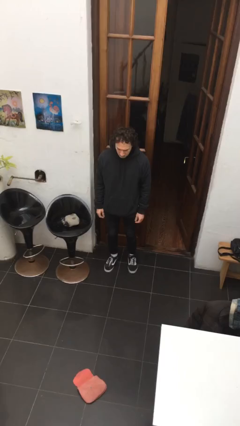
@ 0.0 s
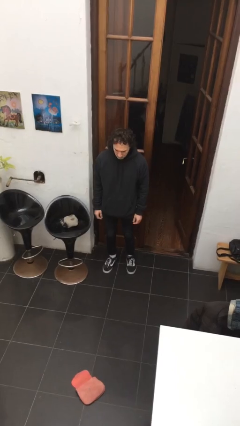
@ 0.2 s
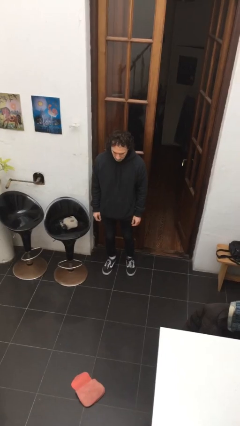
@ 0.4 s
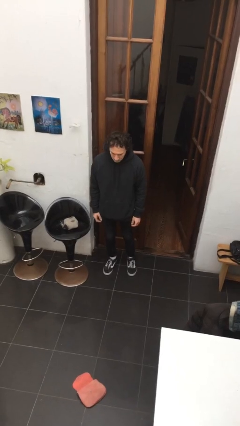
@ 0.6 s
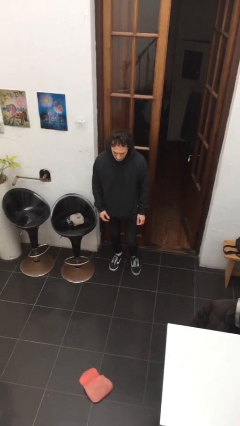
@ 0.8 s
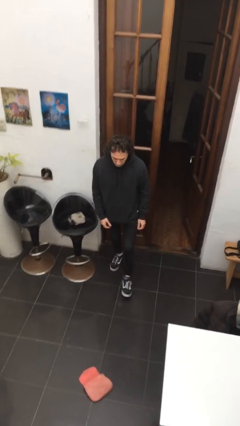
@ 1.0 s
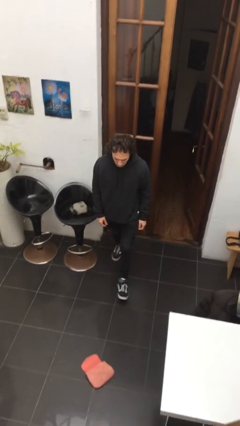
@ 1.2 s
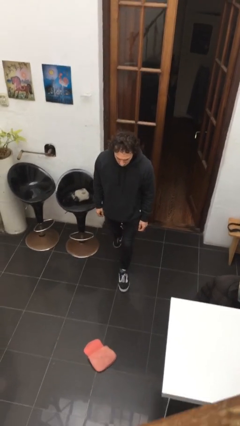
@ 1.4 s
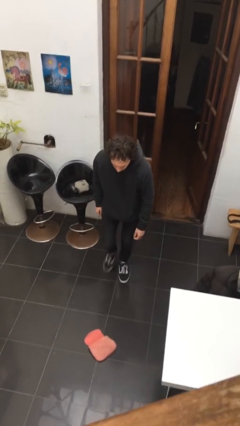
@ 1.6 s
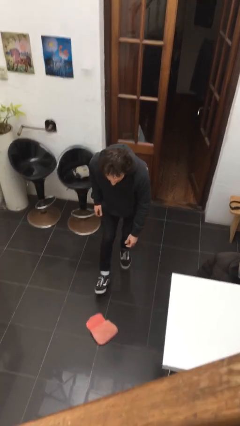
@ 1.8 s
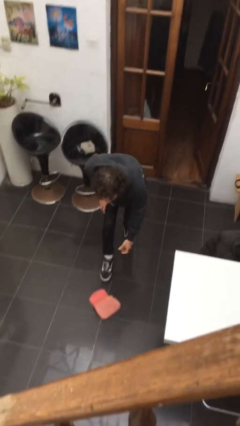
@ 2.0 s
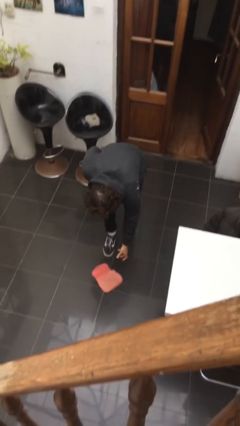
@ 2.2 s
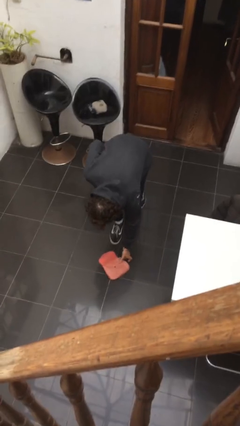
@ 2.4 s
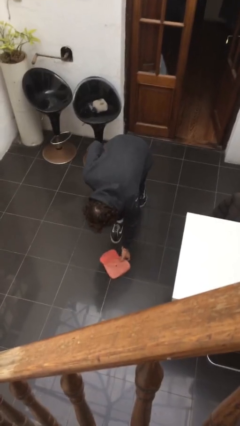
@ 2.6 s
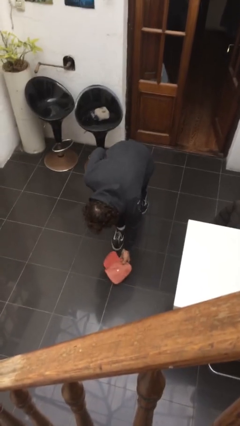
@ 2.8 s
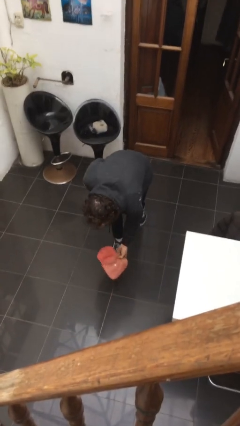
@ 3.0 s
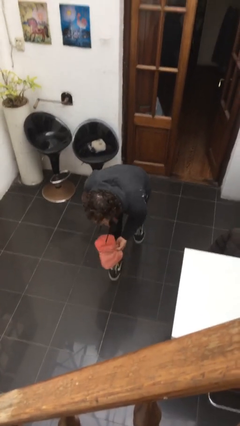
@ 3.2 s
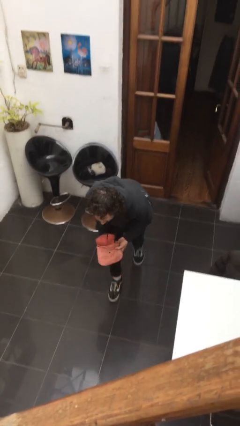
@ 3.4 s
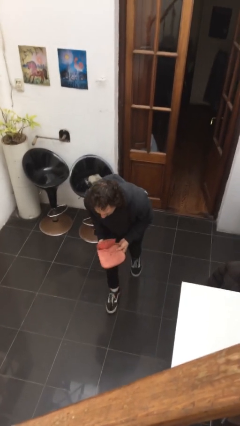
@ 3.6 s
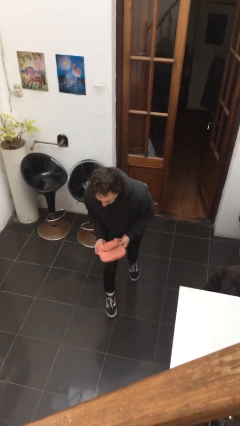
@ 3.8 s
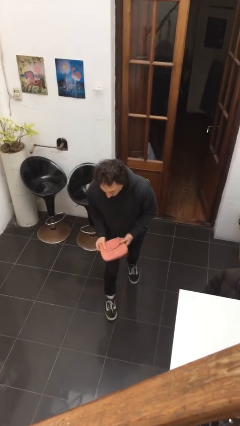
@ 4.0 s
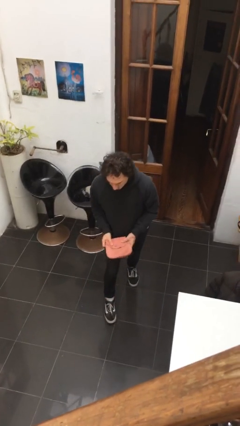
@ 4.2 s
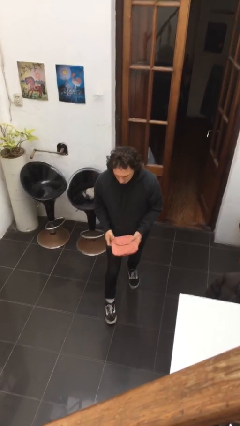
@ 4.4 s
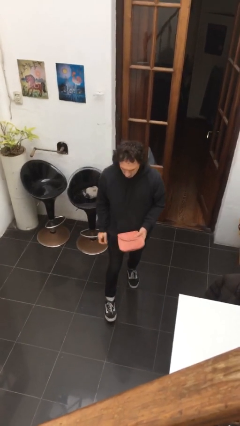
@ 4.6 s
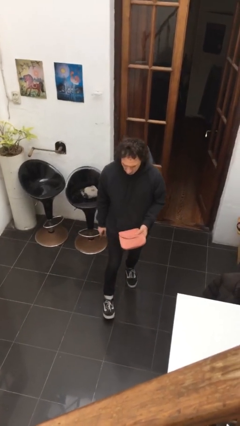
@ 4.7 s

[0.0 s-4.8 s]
person picks up object from floor

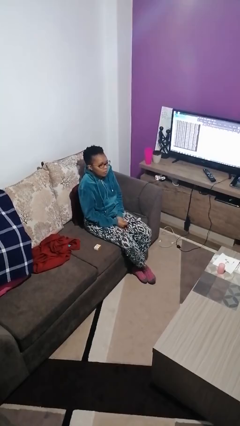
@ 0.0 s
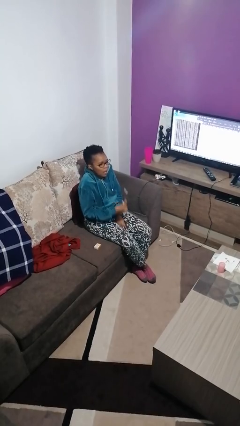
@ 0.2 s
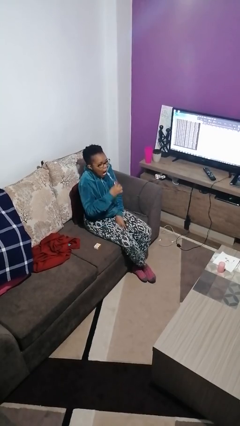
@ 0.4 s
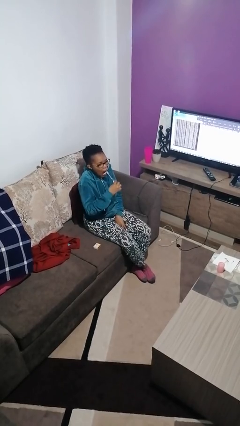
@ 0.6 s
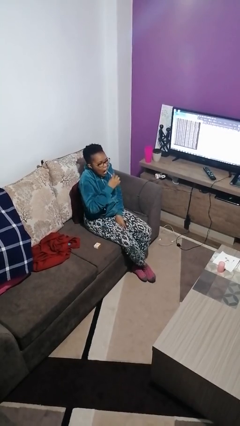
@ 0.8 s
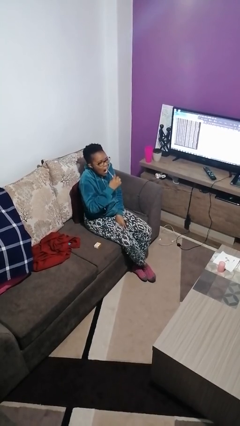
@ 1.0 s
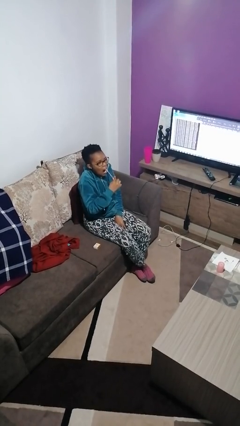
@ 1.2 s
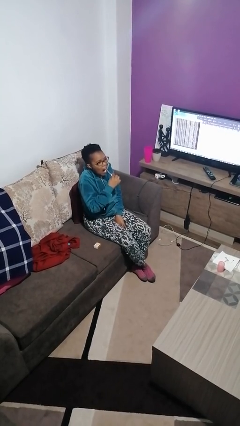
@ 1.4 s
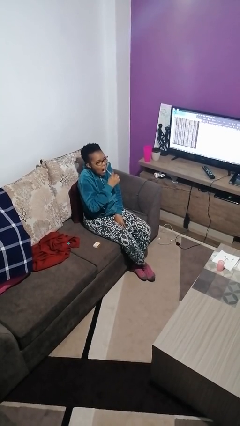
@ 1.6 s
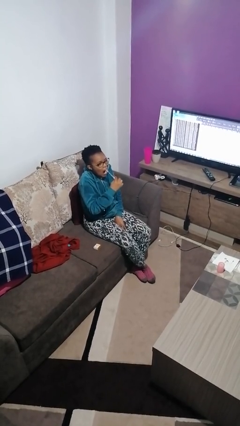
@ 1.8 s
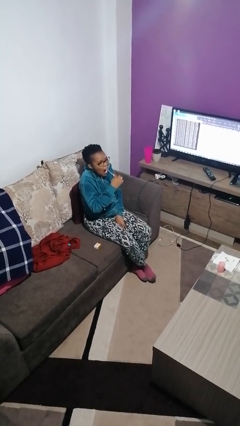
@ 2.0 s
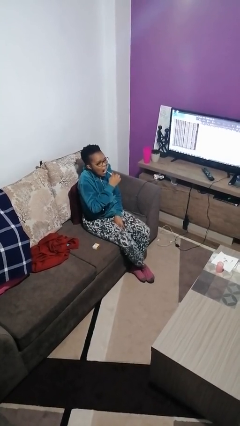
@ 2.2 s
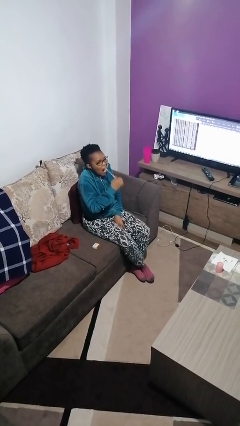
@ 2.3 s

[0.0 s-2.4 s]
person brushes teeth

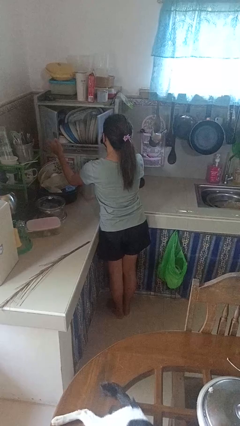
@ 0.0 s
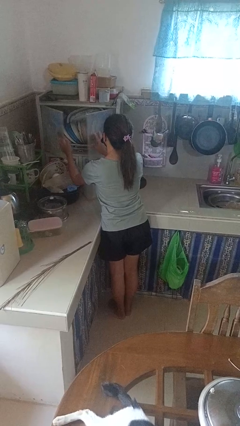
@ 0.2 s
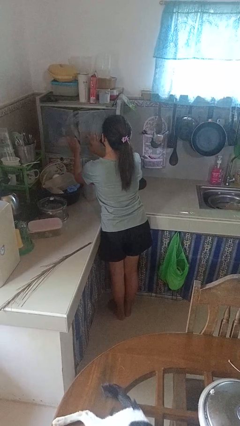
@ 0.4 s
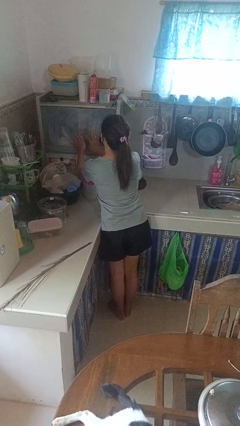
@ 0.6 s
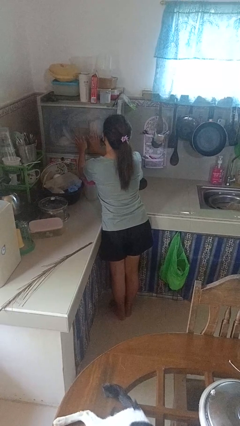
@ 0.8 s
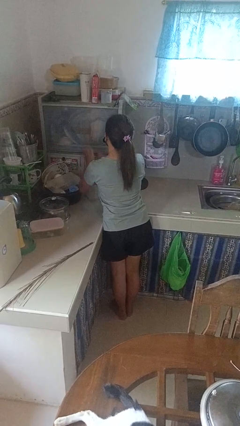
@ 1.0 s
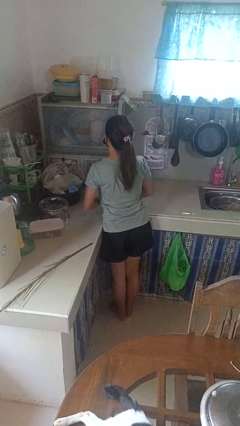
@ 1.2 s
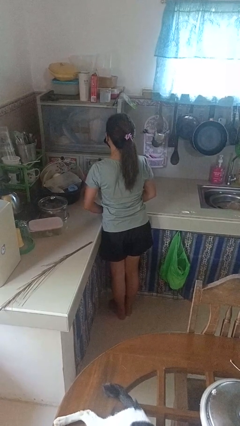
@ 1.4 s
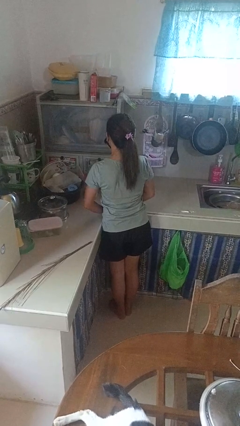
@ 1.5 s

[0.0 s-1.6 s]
person closes kitchen drawer

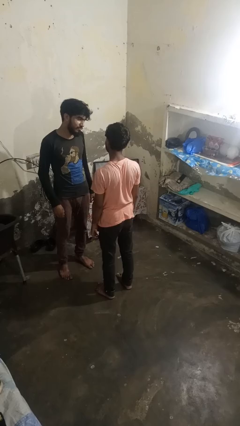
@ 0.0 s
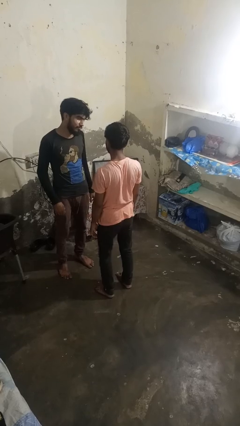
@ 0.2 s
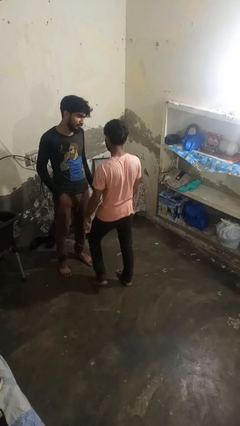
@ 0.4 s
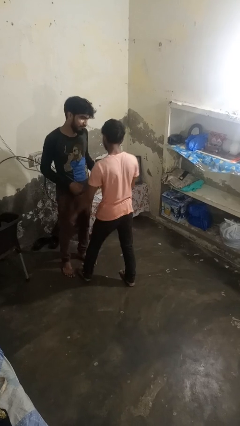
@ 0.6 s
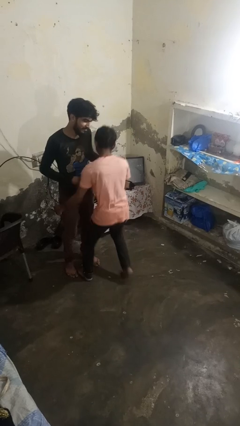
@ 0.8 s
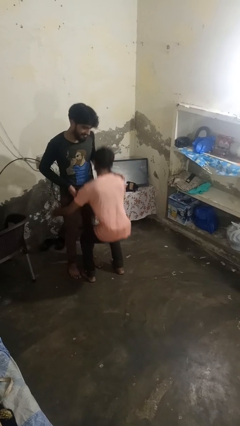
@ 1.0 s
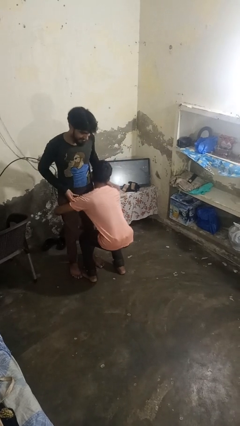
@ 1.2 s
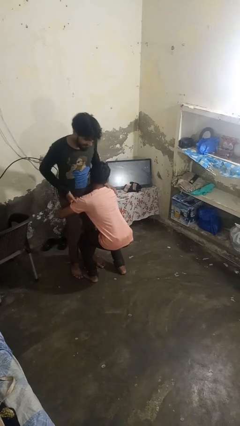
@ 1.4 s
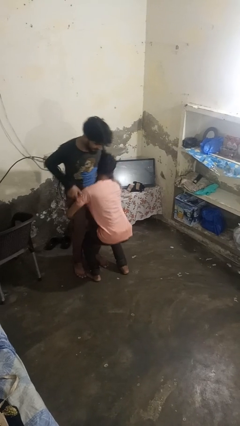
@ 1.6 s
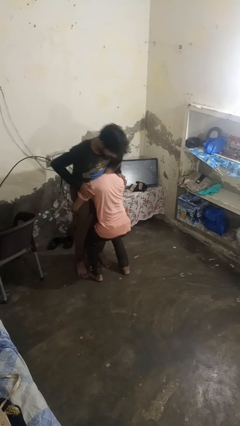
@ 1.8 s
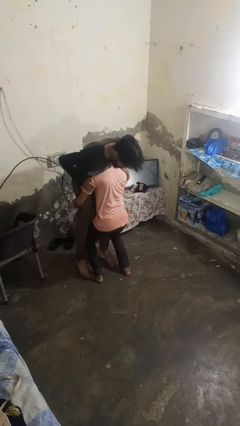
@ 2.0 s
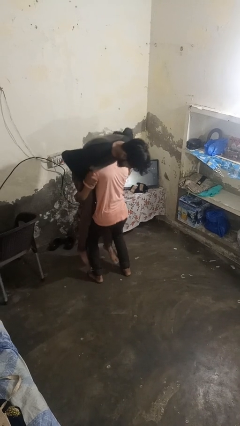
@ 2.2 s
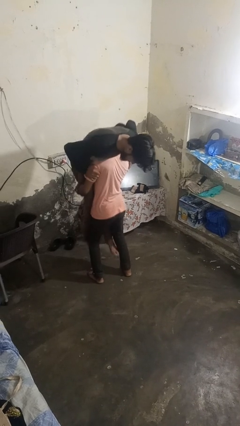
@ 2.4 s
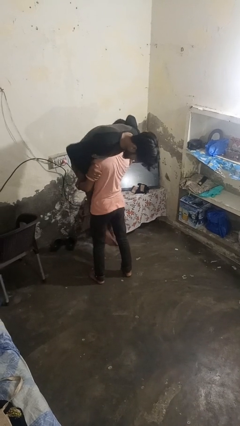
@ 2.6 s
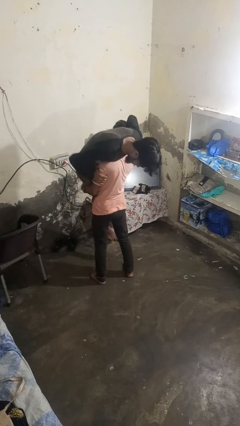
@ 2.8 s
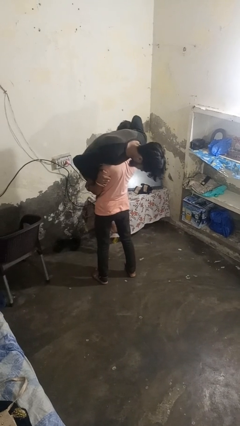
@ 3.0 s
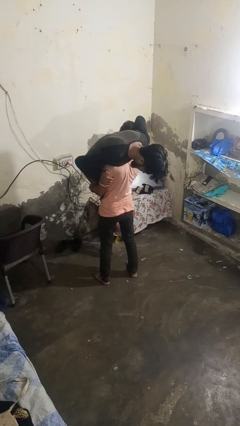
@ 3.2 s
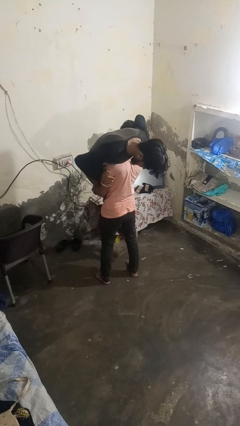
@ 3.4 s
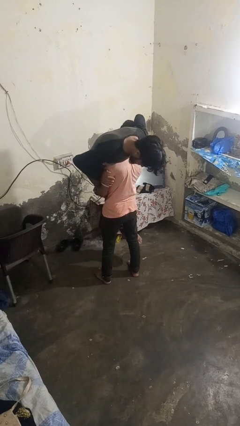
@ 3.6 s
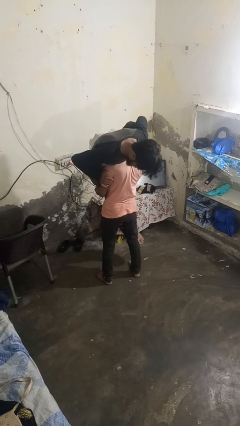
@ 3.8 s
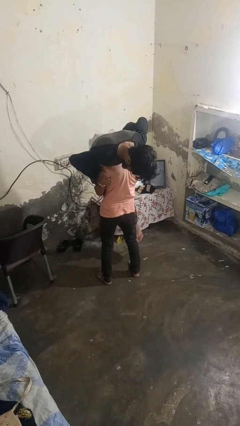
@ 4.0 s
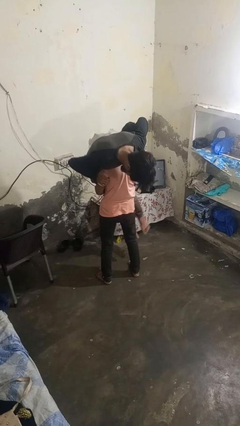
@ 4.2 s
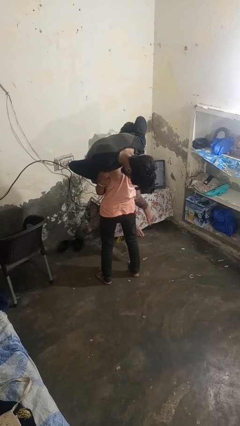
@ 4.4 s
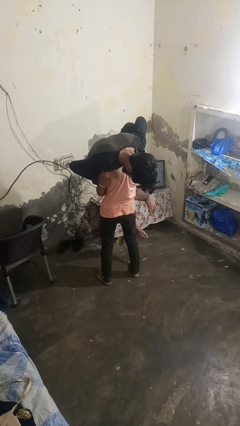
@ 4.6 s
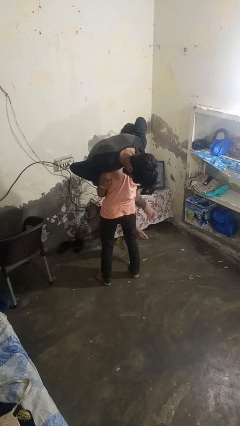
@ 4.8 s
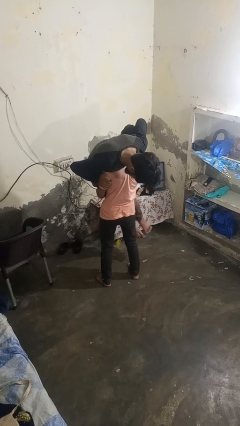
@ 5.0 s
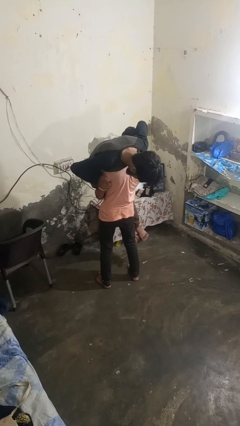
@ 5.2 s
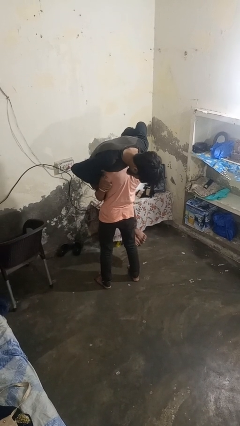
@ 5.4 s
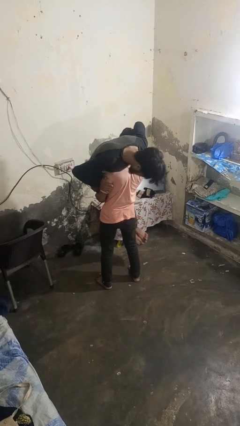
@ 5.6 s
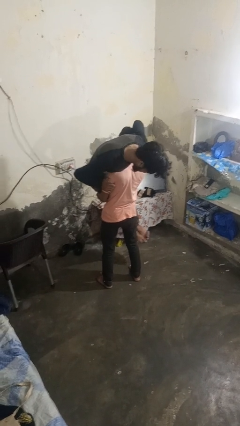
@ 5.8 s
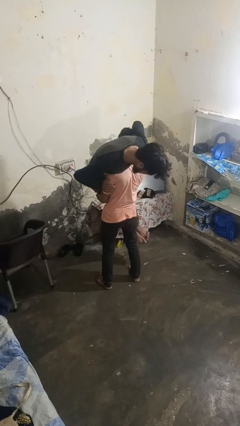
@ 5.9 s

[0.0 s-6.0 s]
person carries person over shoulder

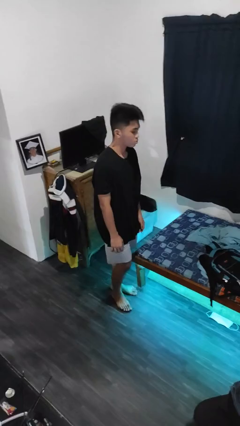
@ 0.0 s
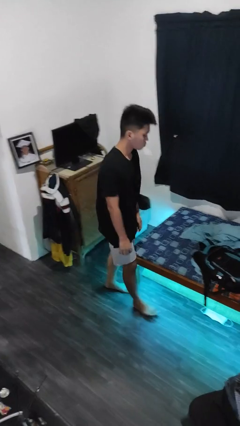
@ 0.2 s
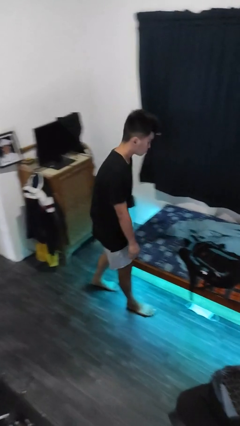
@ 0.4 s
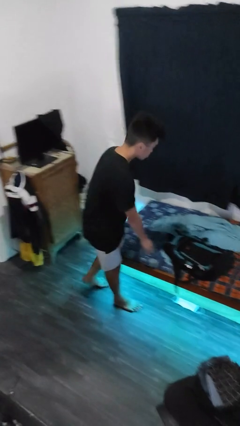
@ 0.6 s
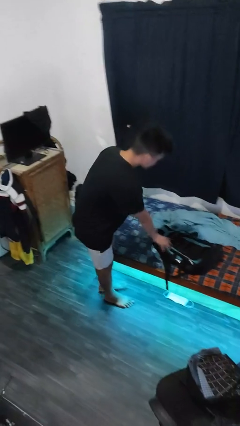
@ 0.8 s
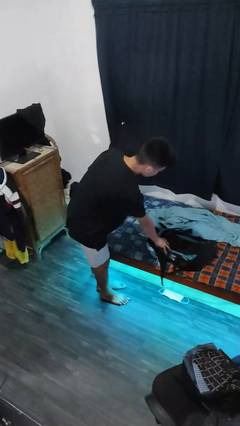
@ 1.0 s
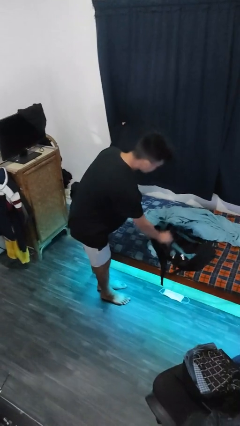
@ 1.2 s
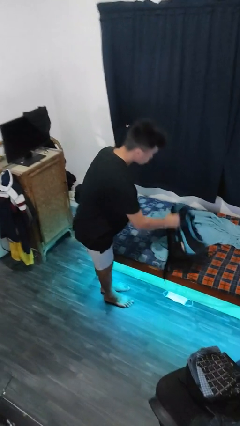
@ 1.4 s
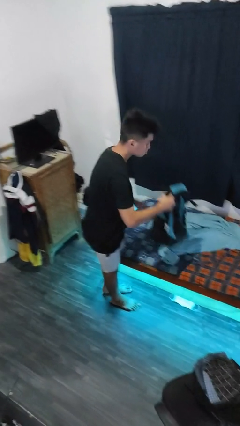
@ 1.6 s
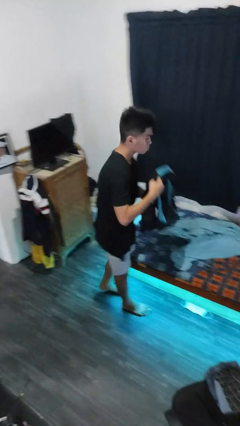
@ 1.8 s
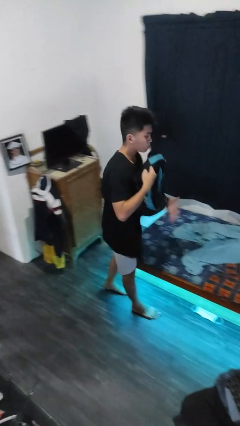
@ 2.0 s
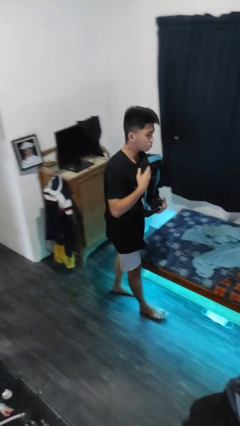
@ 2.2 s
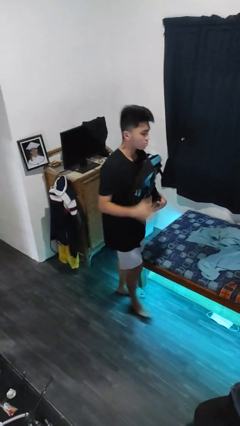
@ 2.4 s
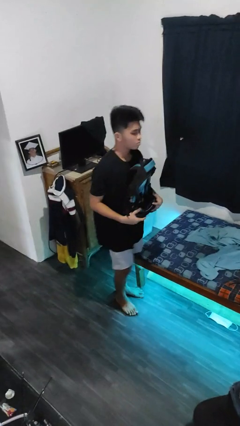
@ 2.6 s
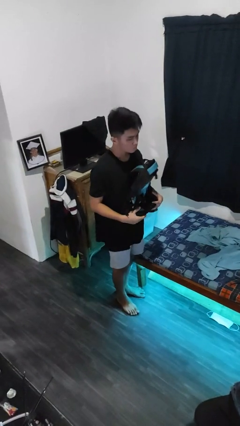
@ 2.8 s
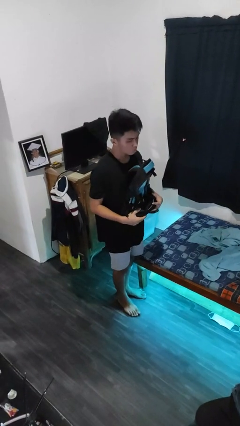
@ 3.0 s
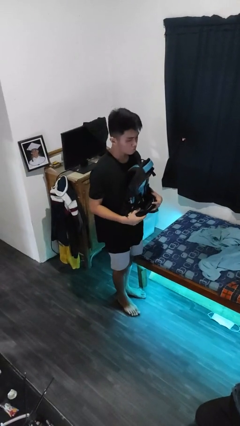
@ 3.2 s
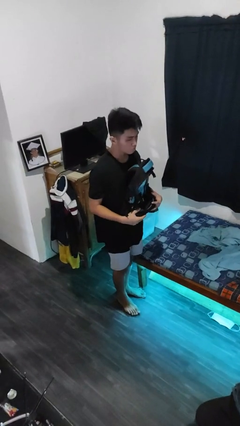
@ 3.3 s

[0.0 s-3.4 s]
person picks up object from bed
